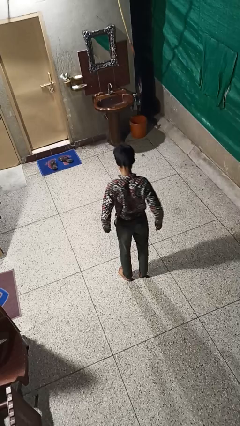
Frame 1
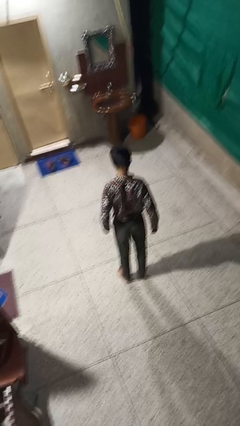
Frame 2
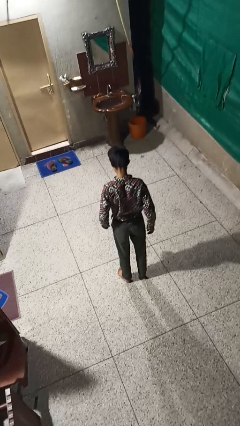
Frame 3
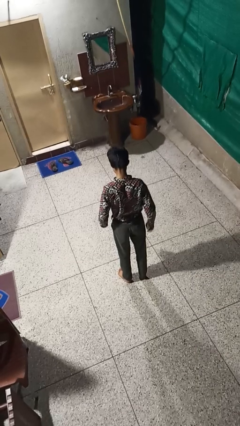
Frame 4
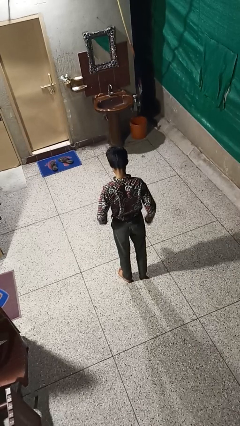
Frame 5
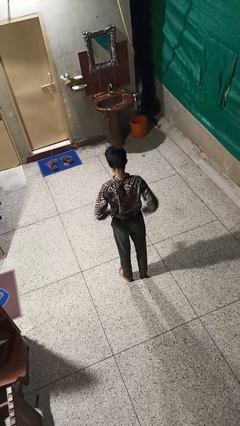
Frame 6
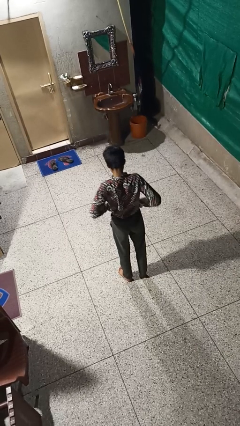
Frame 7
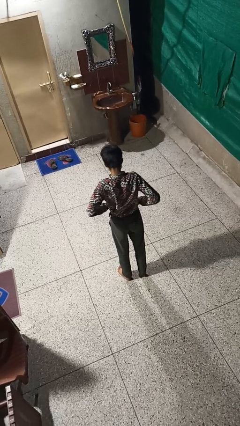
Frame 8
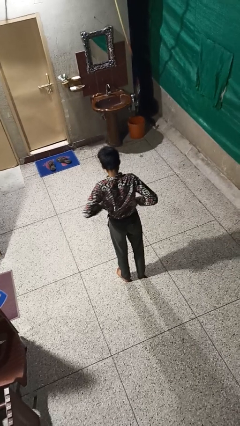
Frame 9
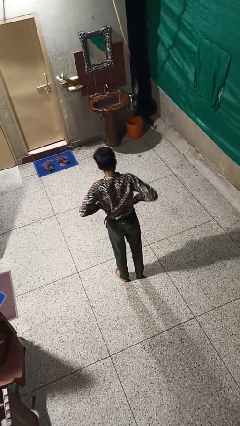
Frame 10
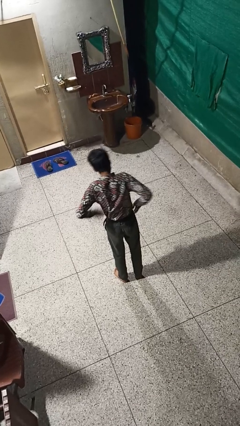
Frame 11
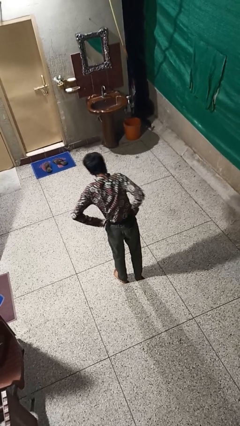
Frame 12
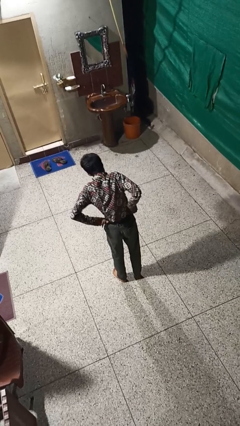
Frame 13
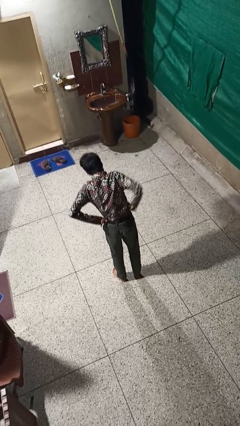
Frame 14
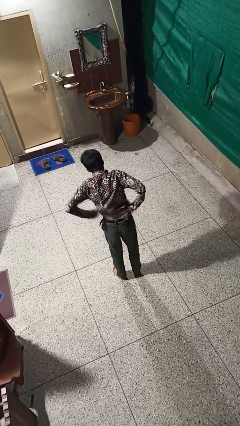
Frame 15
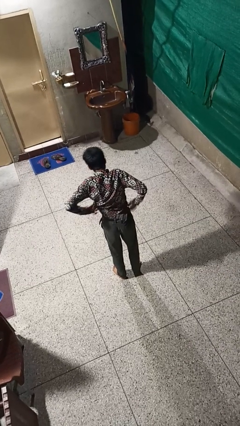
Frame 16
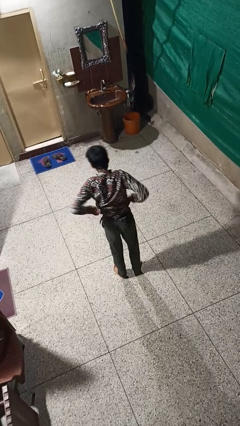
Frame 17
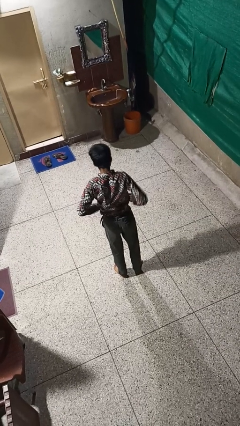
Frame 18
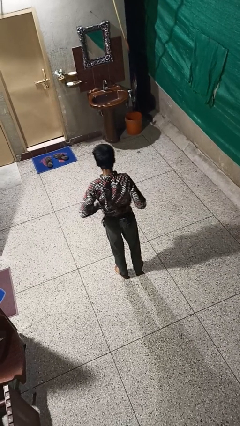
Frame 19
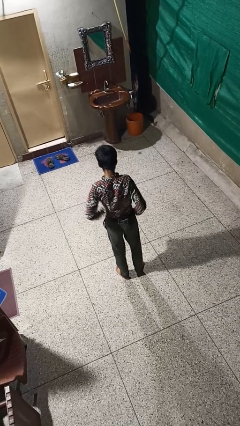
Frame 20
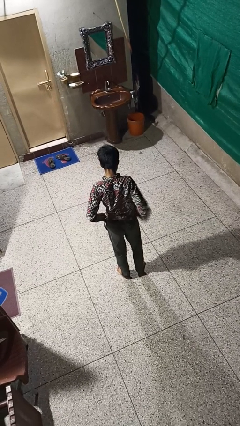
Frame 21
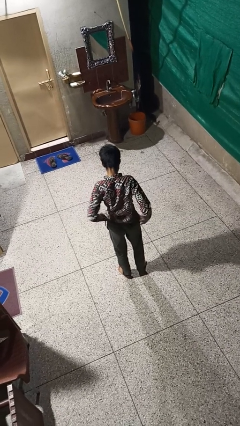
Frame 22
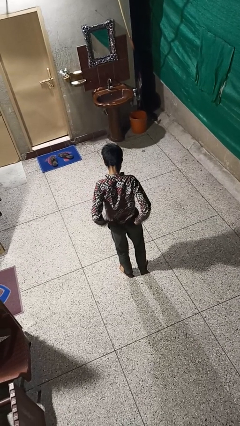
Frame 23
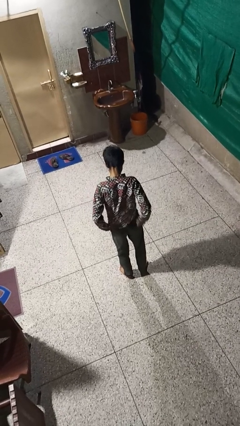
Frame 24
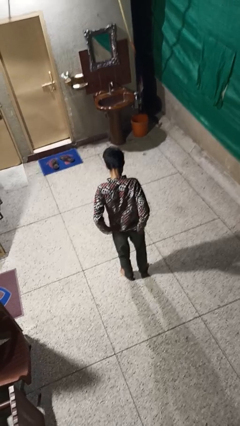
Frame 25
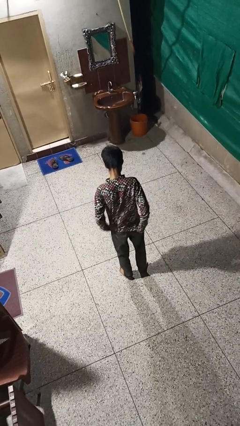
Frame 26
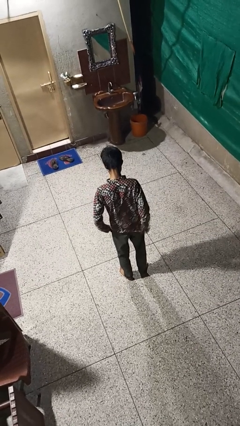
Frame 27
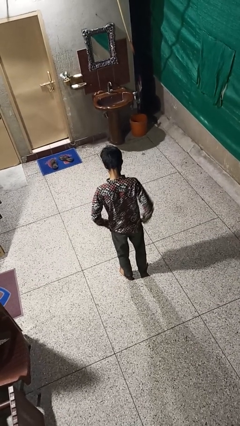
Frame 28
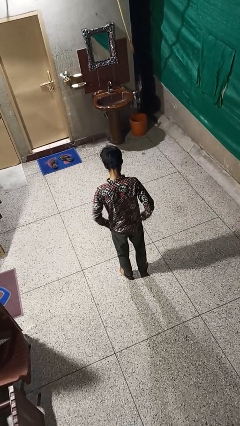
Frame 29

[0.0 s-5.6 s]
person untucks shirt

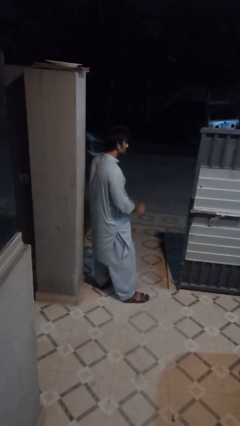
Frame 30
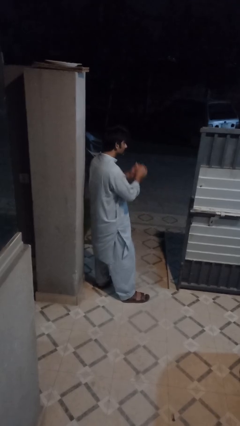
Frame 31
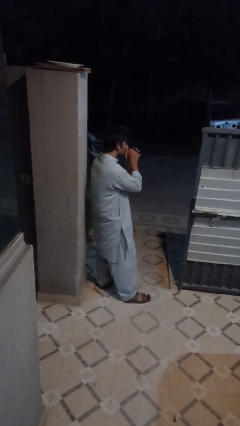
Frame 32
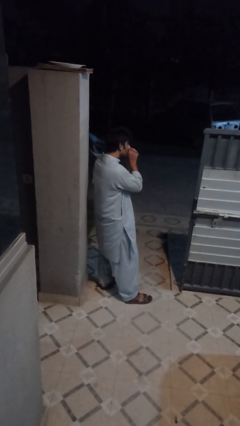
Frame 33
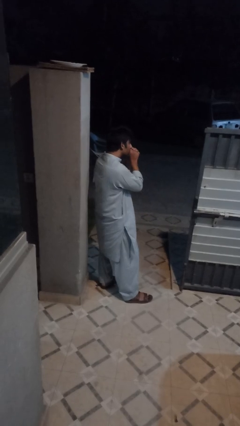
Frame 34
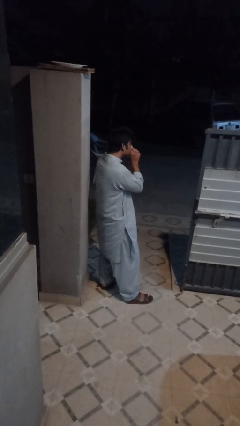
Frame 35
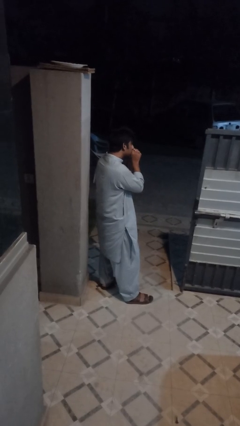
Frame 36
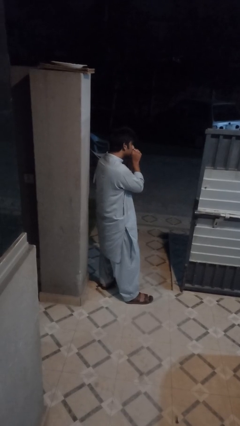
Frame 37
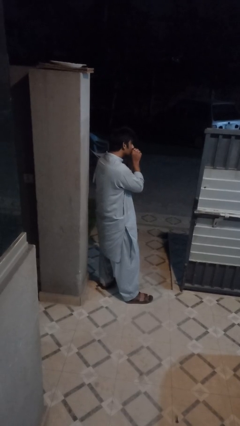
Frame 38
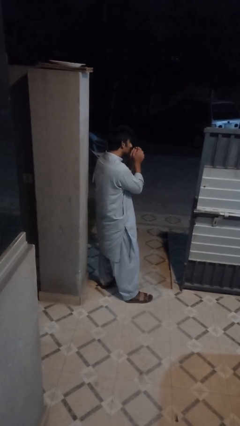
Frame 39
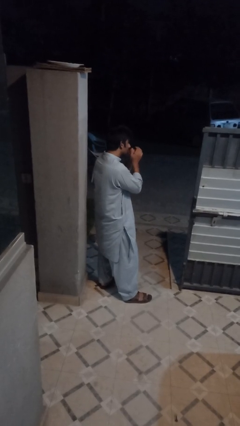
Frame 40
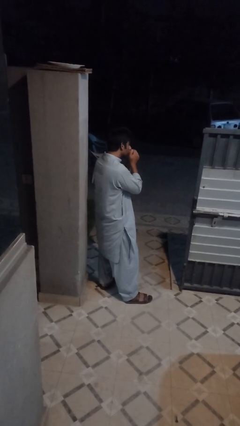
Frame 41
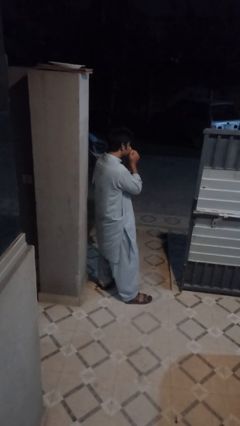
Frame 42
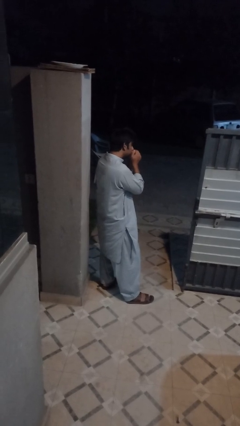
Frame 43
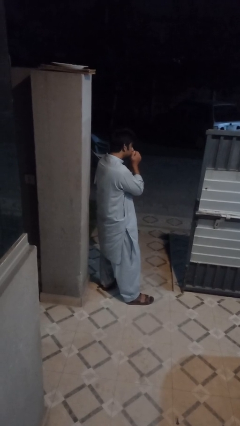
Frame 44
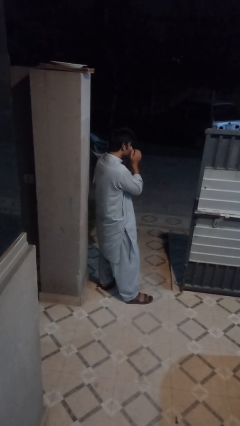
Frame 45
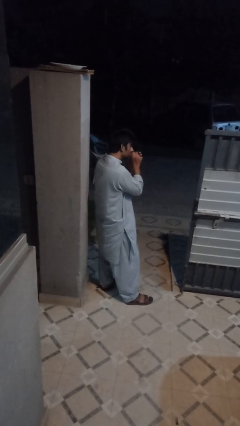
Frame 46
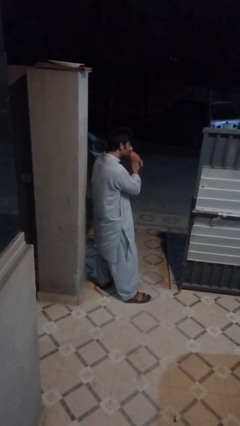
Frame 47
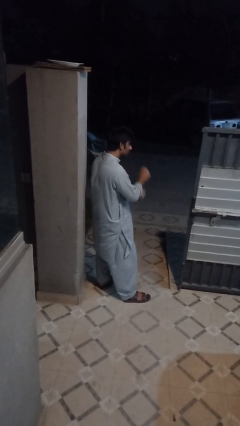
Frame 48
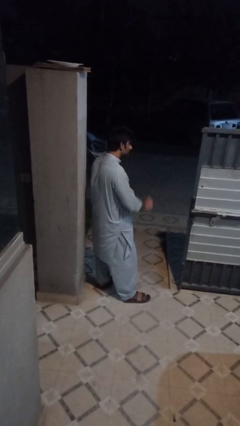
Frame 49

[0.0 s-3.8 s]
person blows into hands

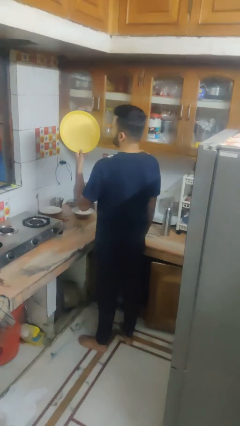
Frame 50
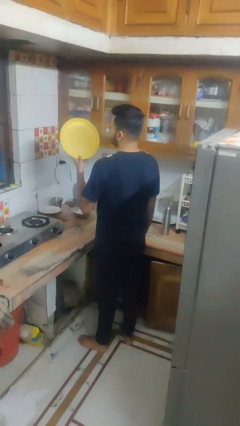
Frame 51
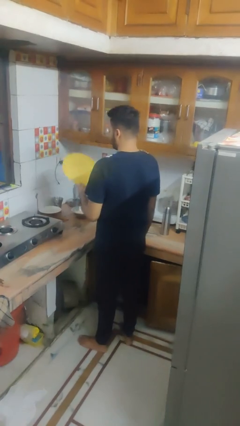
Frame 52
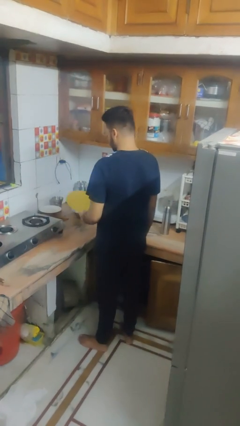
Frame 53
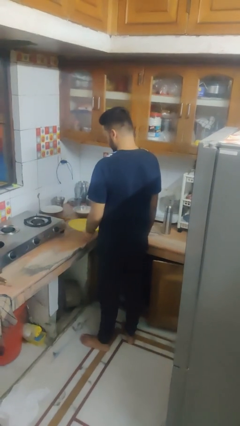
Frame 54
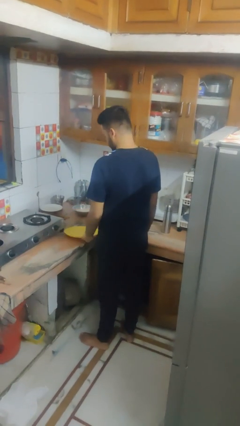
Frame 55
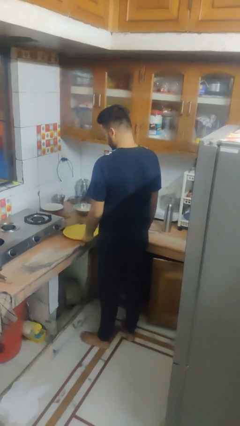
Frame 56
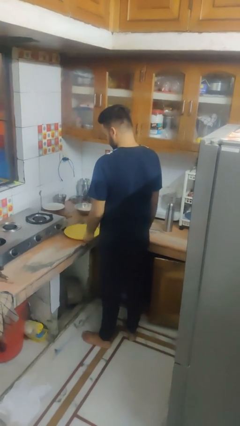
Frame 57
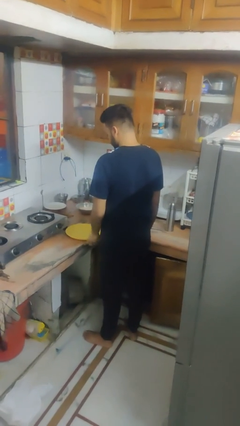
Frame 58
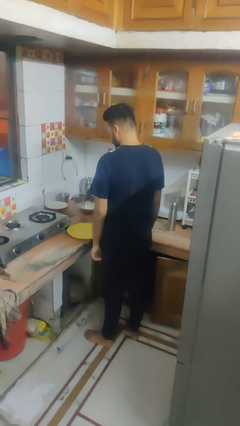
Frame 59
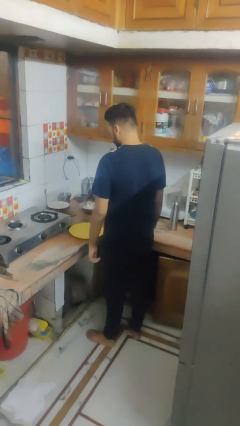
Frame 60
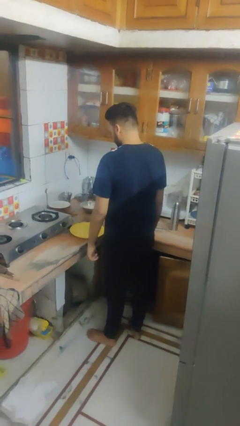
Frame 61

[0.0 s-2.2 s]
person puts down object on countertop

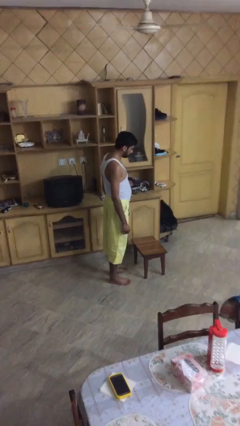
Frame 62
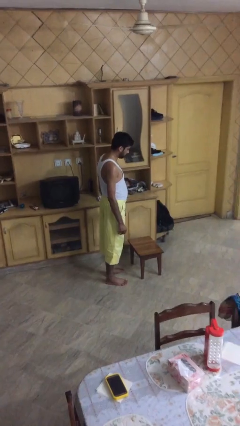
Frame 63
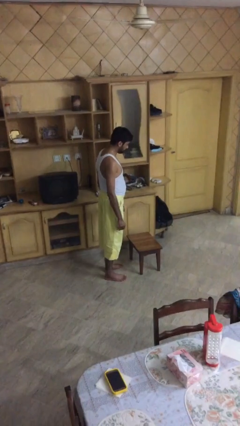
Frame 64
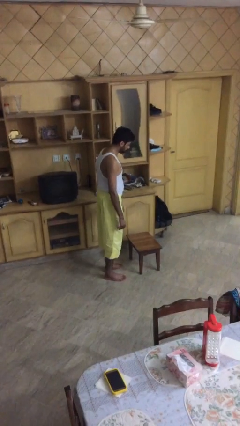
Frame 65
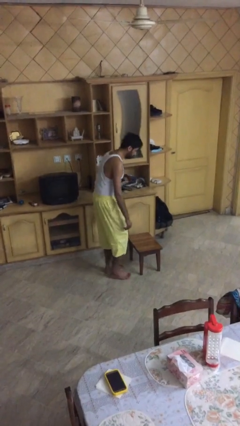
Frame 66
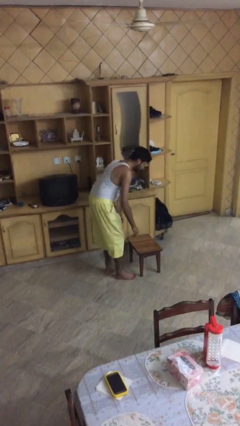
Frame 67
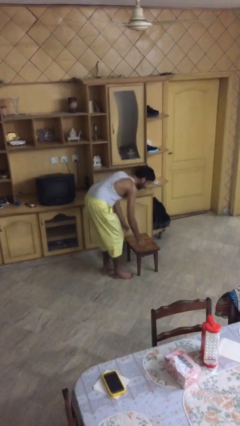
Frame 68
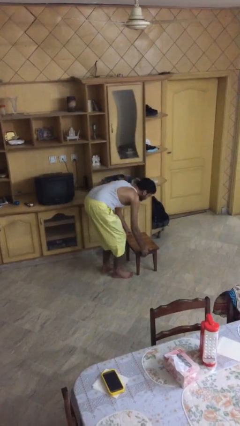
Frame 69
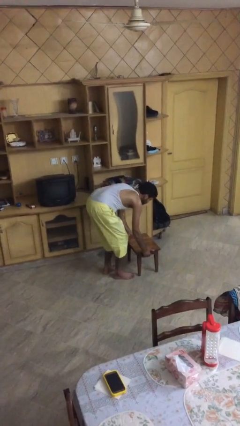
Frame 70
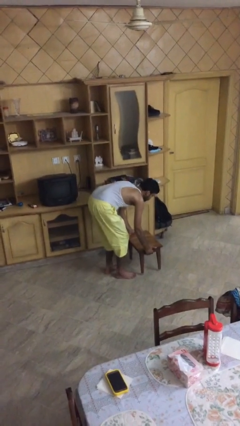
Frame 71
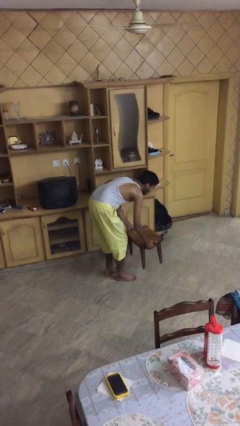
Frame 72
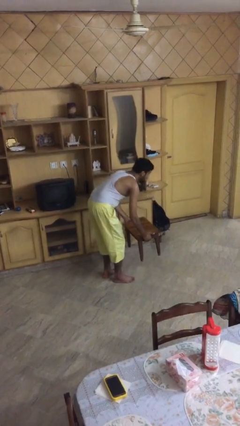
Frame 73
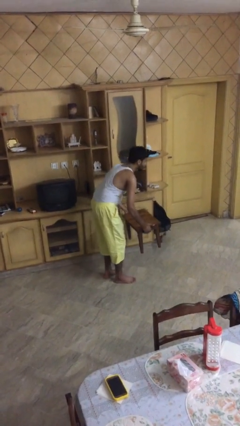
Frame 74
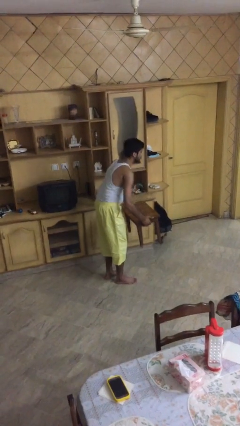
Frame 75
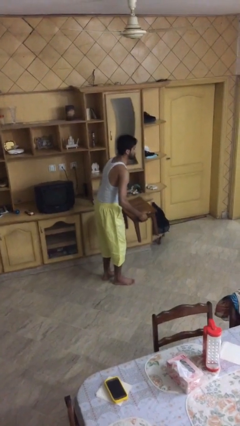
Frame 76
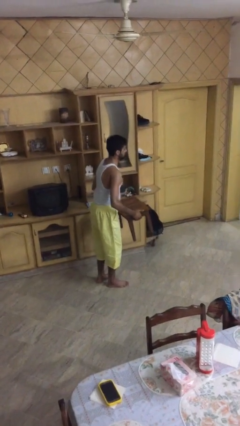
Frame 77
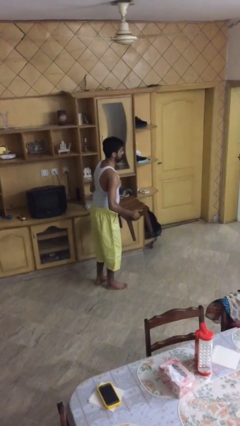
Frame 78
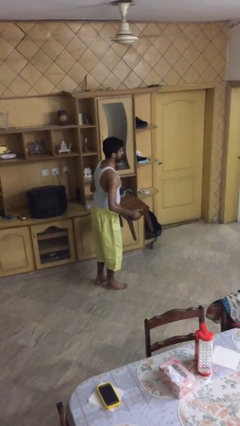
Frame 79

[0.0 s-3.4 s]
person picks up object from floor

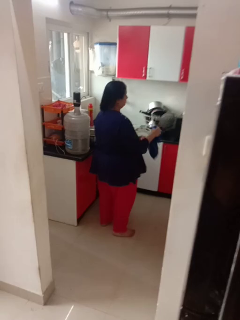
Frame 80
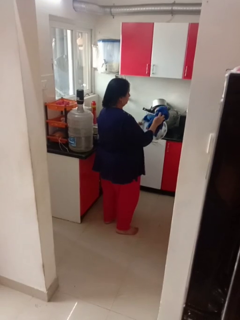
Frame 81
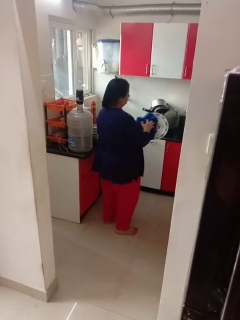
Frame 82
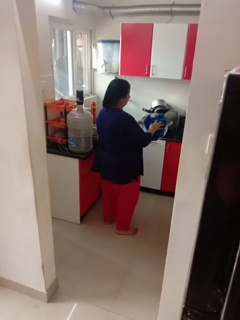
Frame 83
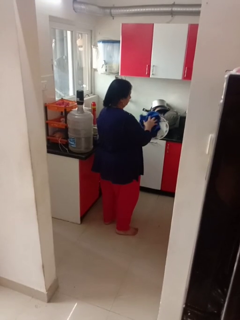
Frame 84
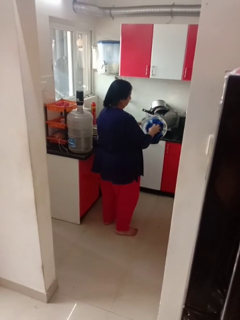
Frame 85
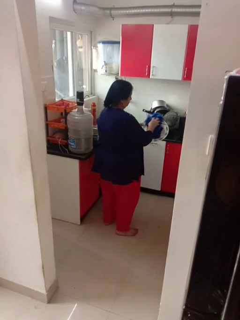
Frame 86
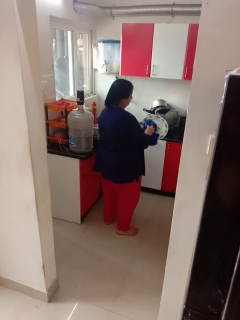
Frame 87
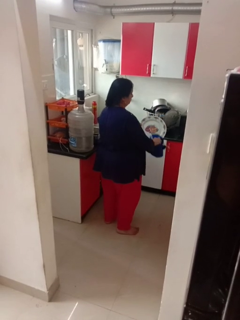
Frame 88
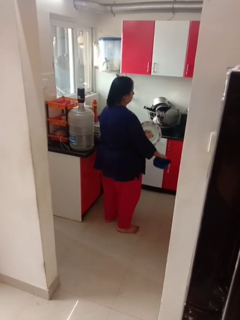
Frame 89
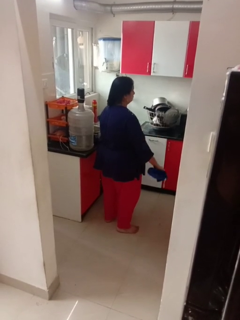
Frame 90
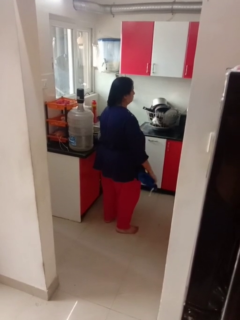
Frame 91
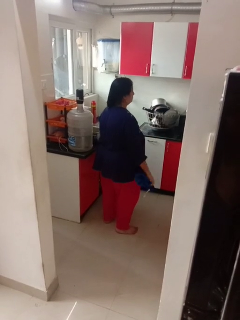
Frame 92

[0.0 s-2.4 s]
person dries dish

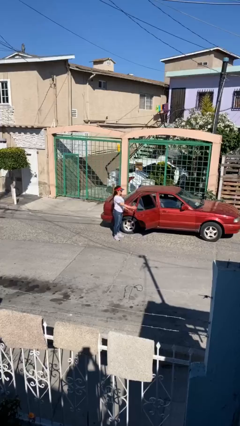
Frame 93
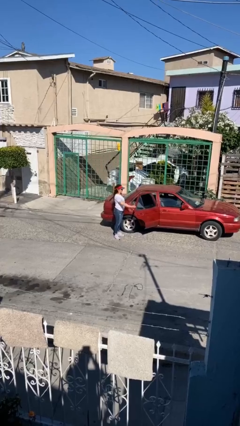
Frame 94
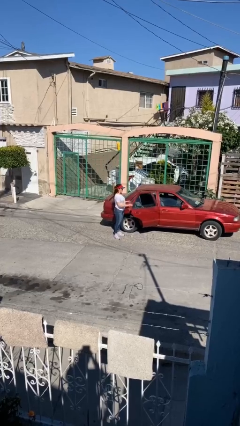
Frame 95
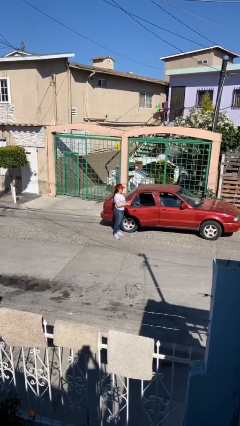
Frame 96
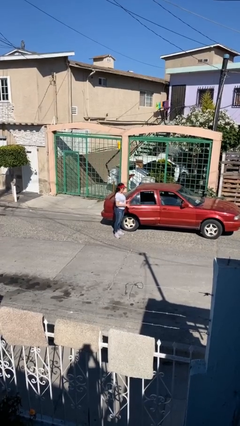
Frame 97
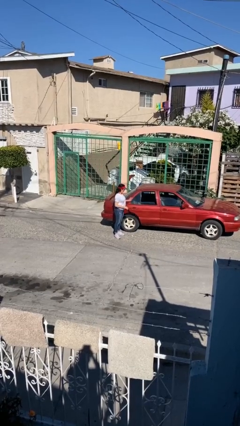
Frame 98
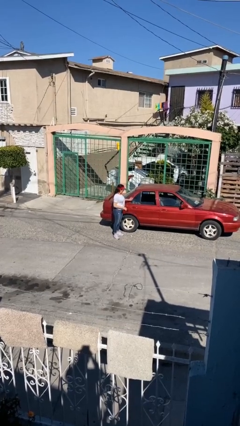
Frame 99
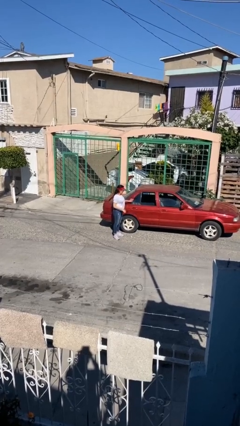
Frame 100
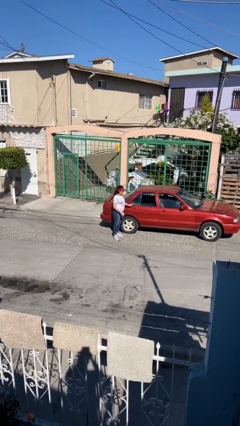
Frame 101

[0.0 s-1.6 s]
person closes car door
